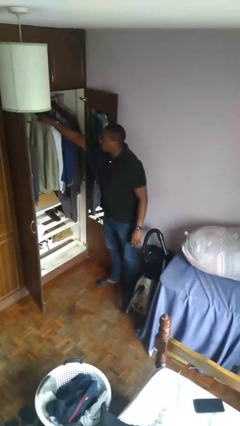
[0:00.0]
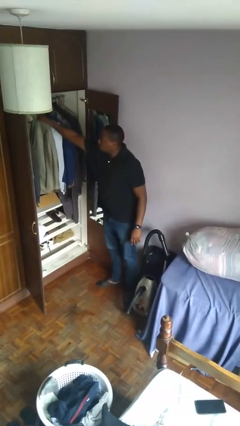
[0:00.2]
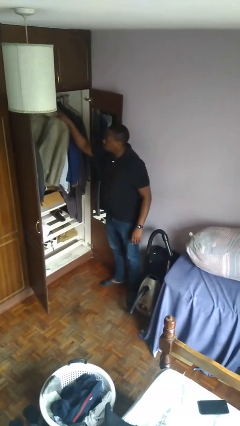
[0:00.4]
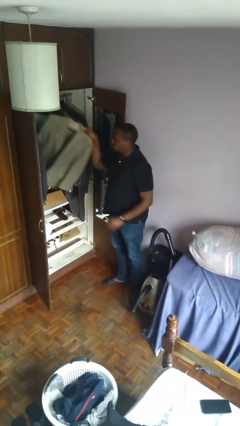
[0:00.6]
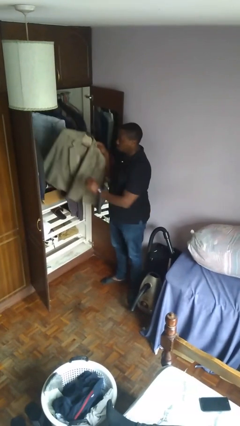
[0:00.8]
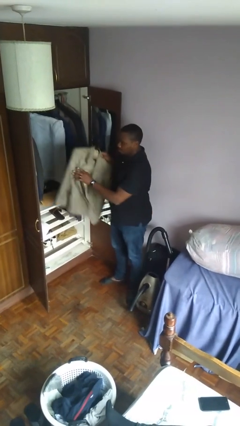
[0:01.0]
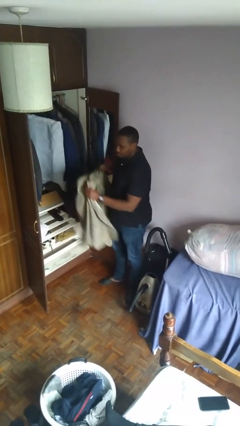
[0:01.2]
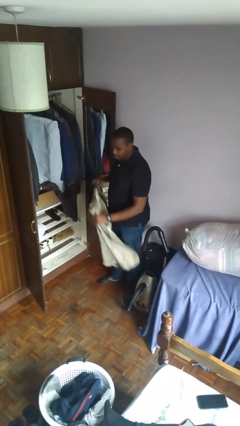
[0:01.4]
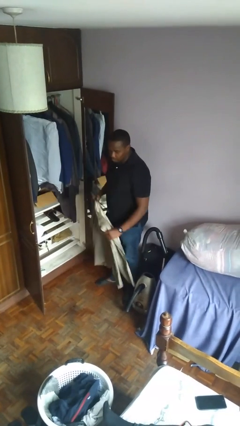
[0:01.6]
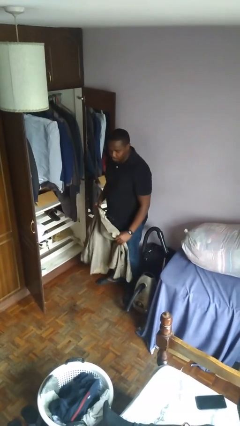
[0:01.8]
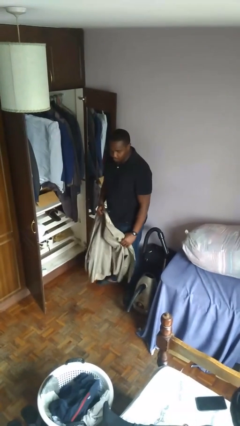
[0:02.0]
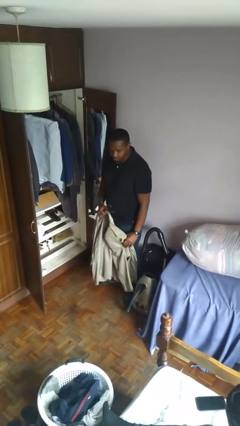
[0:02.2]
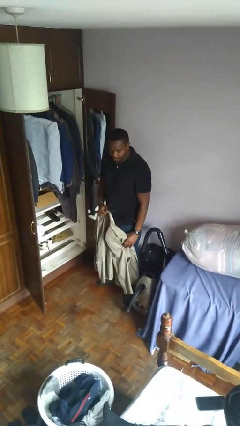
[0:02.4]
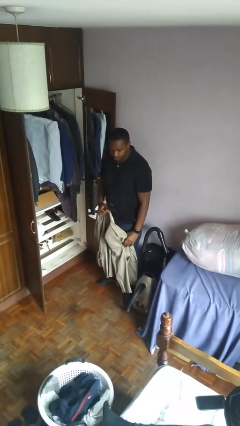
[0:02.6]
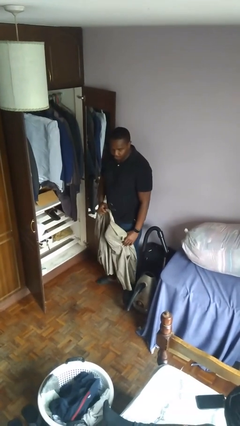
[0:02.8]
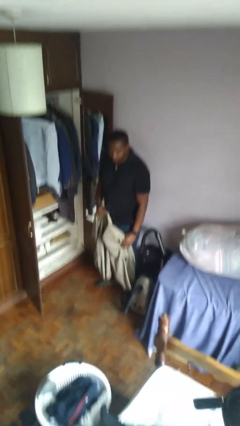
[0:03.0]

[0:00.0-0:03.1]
person takes clothes from closet

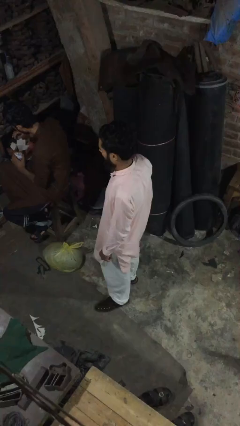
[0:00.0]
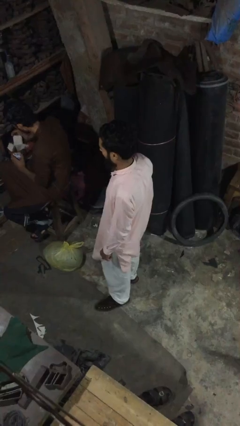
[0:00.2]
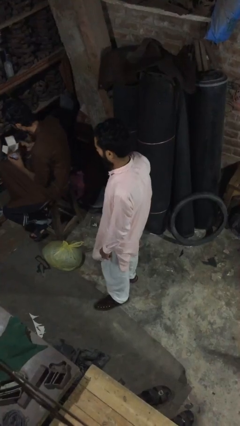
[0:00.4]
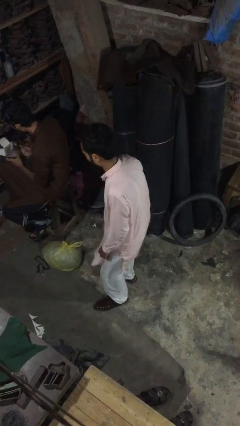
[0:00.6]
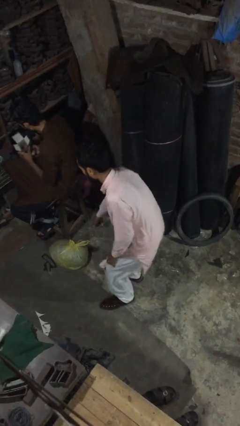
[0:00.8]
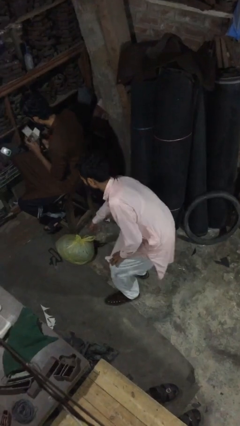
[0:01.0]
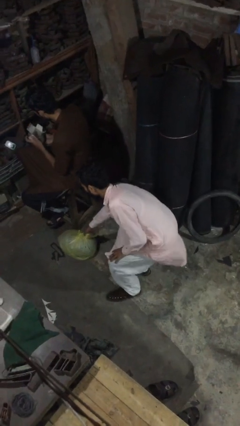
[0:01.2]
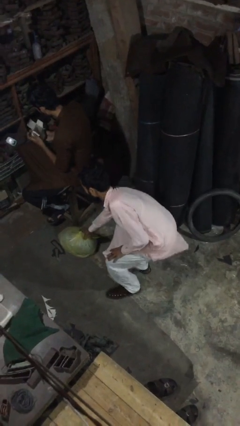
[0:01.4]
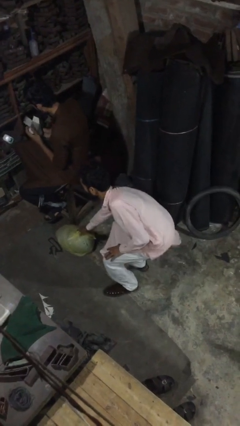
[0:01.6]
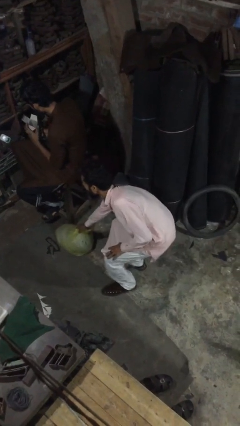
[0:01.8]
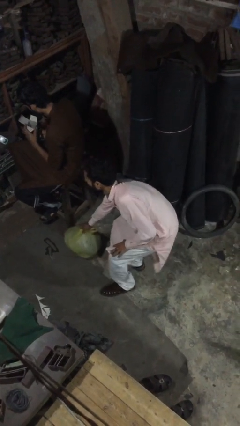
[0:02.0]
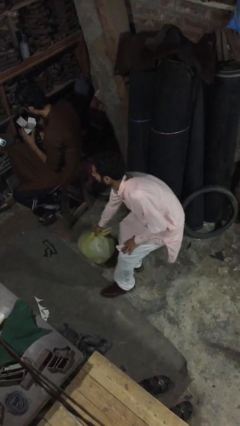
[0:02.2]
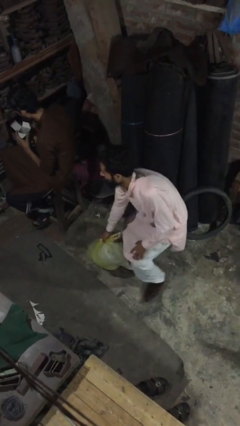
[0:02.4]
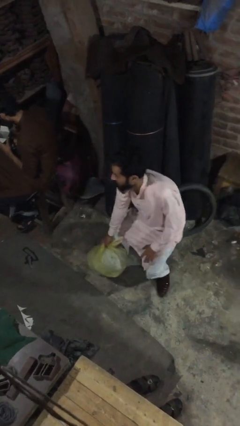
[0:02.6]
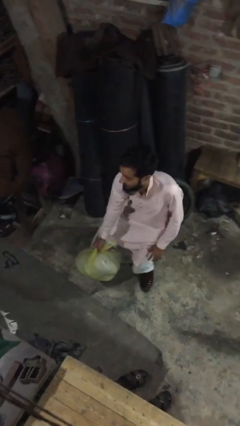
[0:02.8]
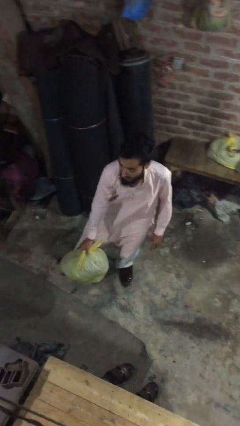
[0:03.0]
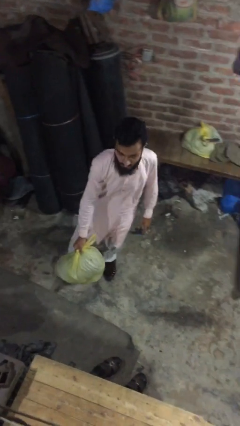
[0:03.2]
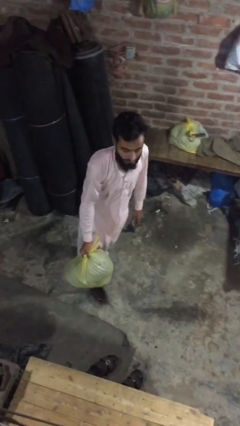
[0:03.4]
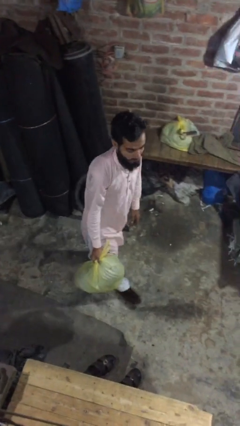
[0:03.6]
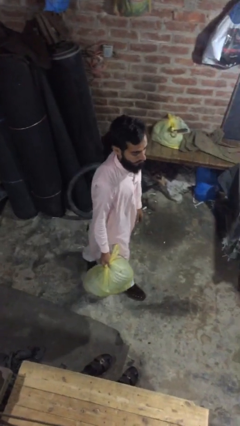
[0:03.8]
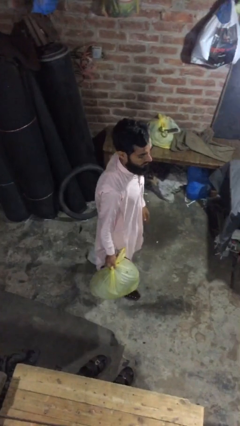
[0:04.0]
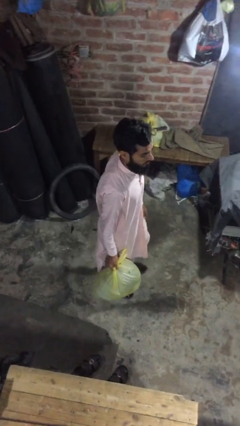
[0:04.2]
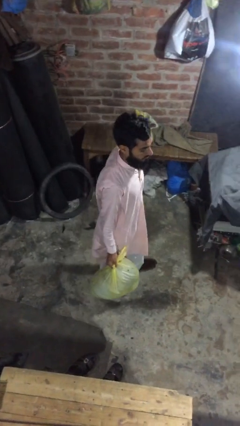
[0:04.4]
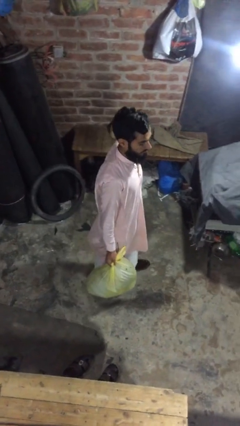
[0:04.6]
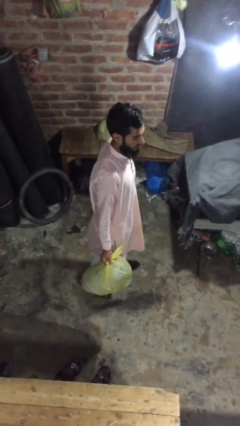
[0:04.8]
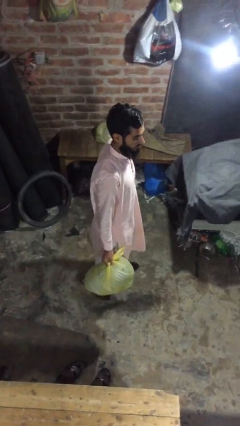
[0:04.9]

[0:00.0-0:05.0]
person steals object from person

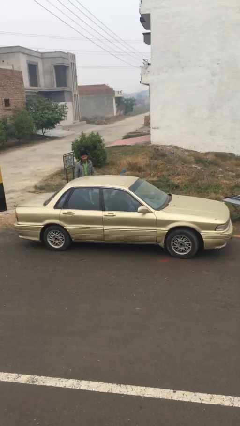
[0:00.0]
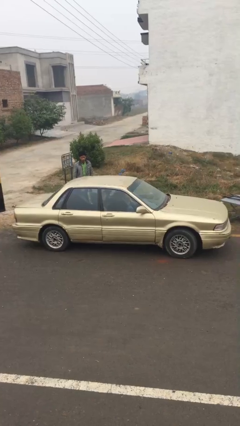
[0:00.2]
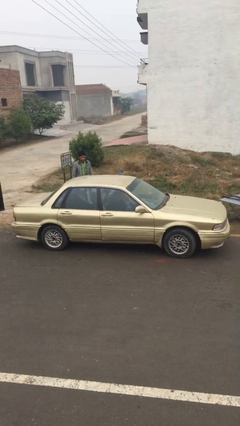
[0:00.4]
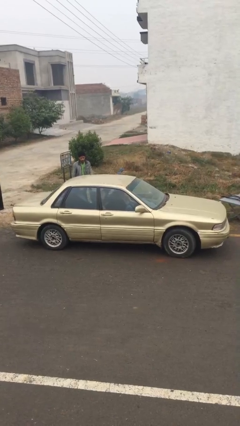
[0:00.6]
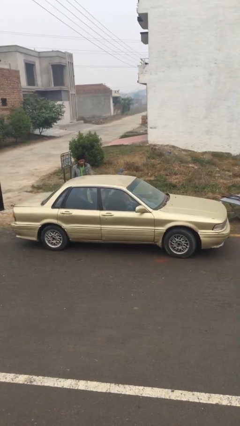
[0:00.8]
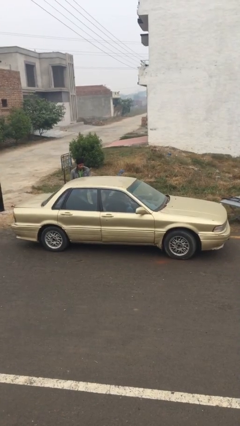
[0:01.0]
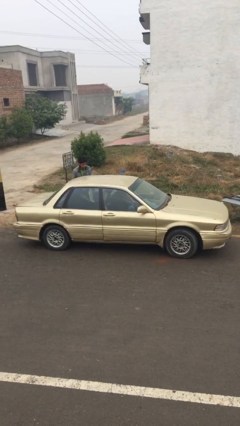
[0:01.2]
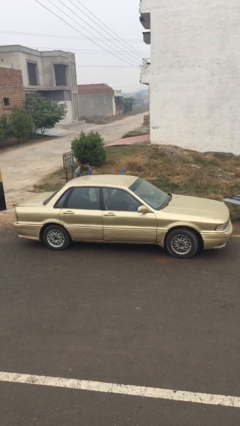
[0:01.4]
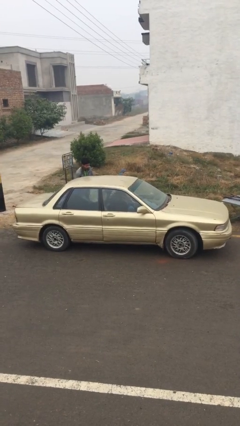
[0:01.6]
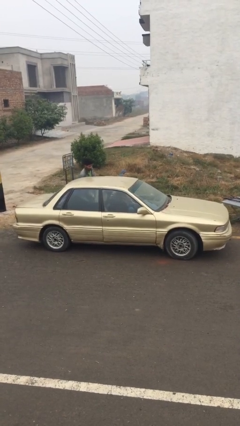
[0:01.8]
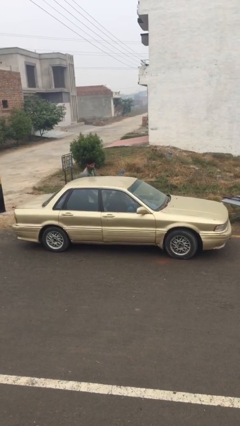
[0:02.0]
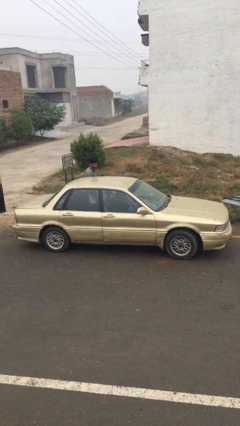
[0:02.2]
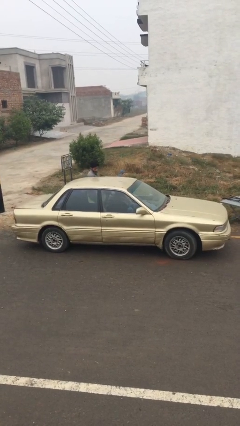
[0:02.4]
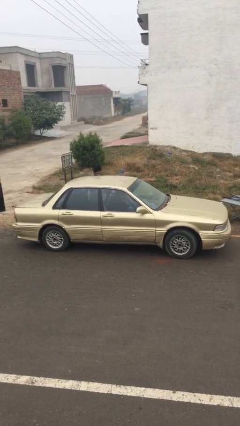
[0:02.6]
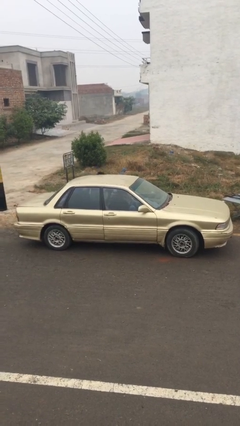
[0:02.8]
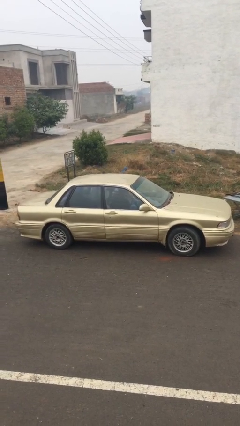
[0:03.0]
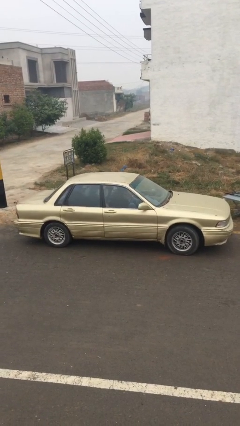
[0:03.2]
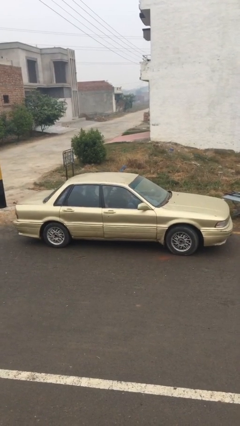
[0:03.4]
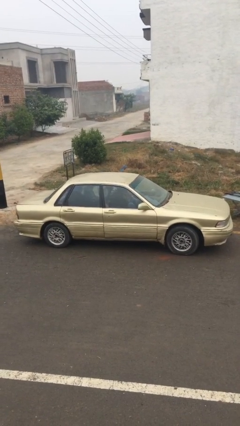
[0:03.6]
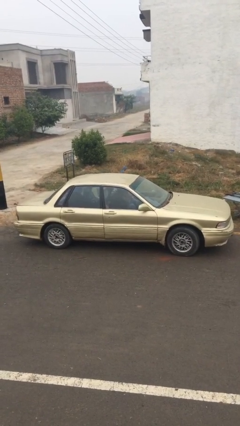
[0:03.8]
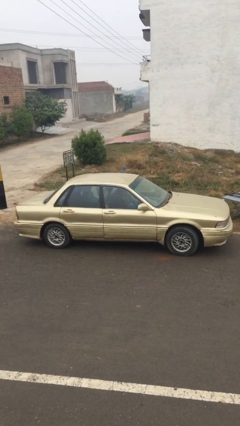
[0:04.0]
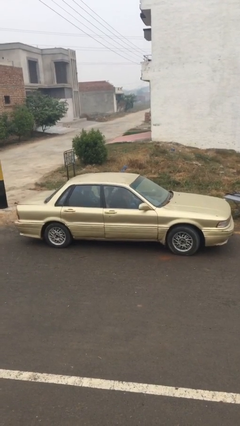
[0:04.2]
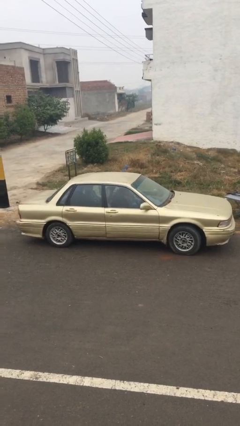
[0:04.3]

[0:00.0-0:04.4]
car picks up person

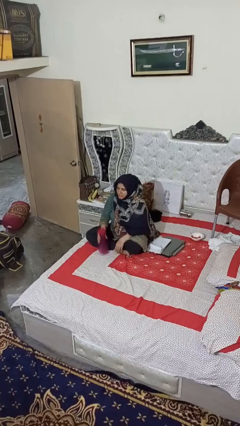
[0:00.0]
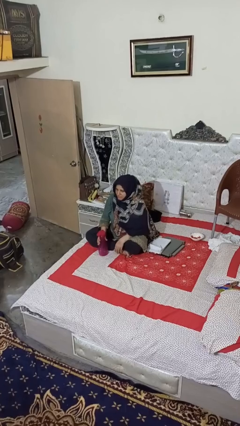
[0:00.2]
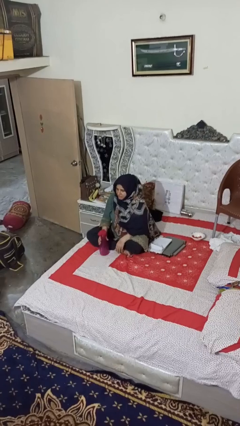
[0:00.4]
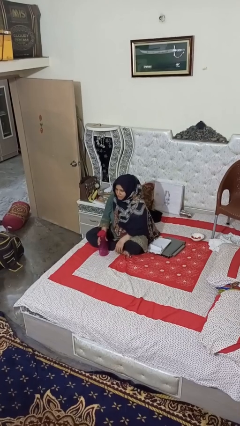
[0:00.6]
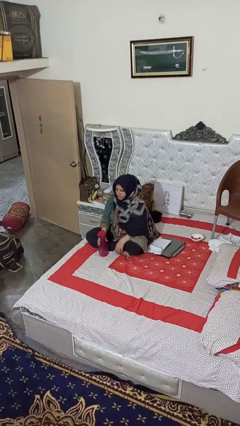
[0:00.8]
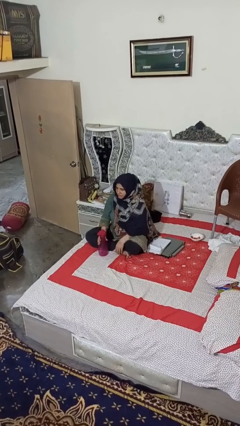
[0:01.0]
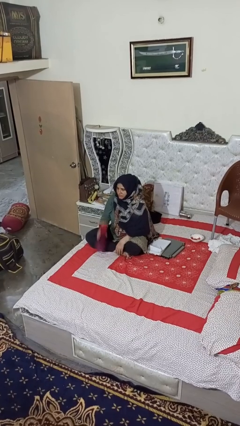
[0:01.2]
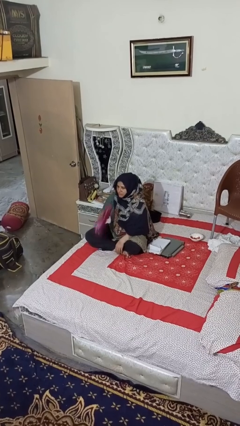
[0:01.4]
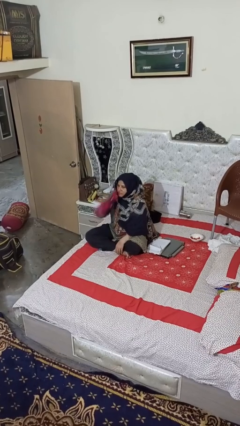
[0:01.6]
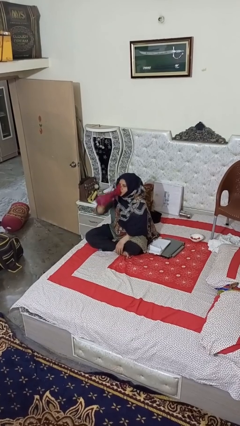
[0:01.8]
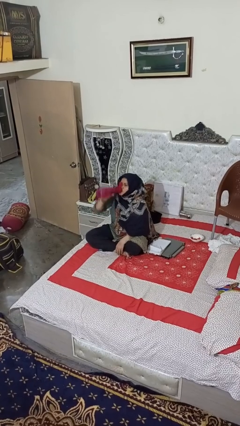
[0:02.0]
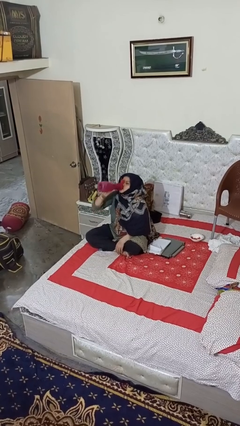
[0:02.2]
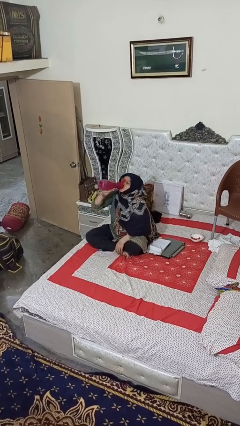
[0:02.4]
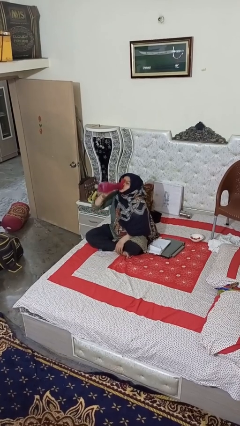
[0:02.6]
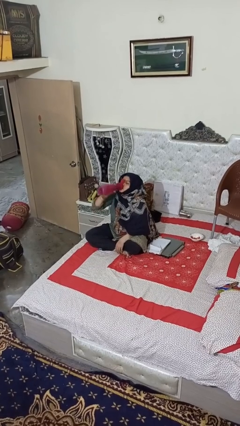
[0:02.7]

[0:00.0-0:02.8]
person drinks from bottle

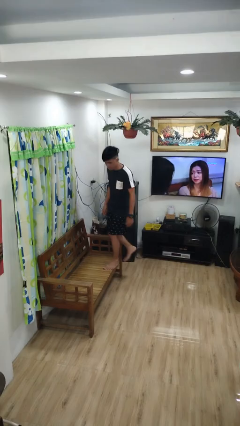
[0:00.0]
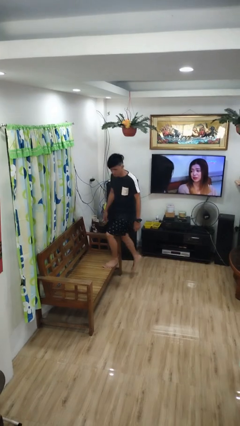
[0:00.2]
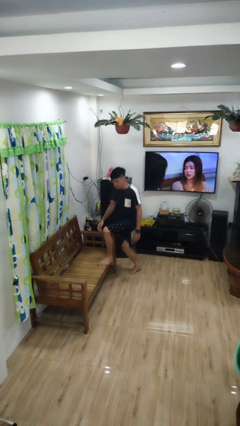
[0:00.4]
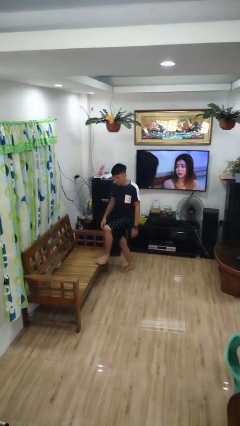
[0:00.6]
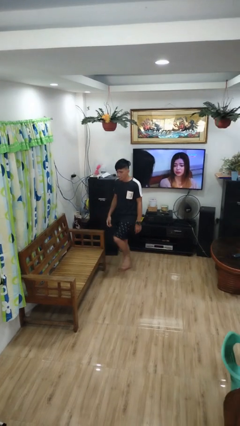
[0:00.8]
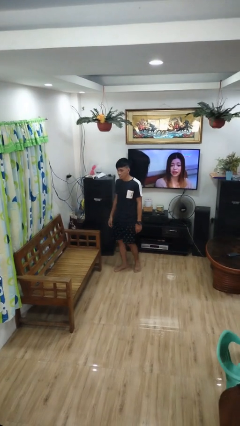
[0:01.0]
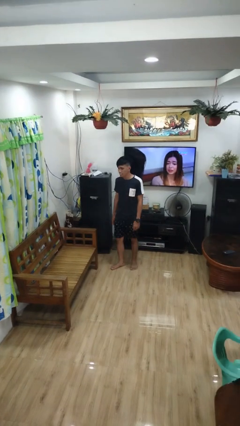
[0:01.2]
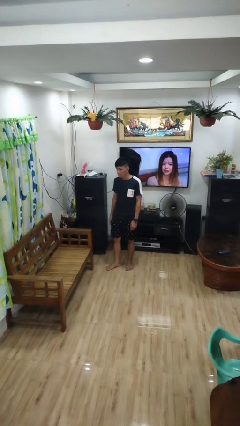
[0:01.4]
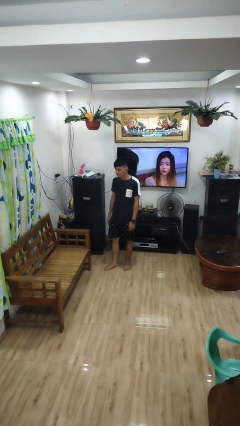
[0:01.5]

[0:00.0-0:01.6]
person climbs off couch

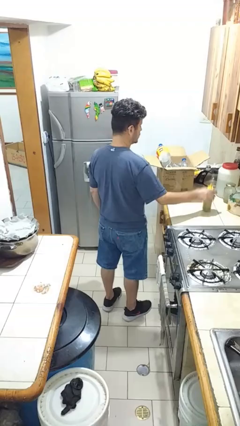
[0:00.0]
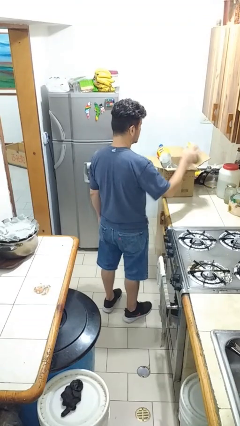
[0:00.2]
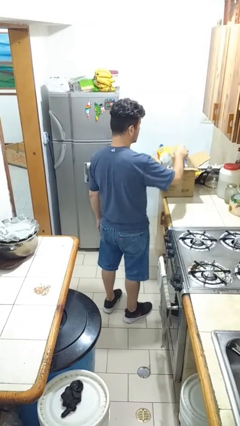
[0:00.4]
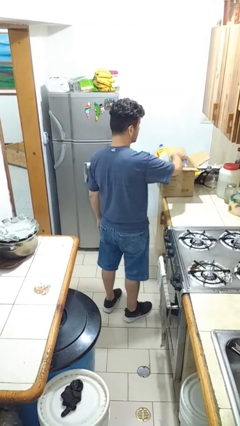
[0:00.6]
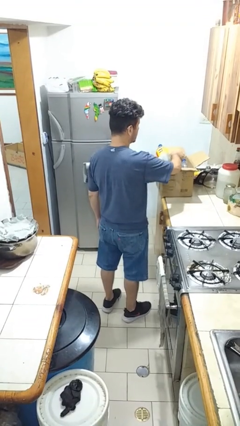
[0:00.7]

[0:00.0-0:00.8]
person puts object into box
